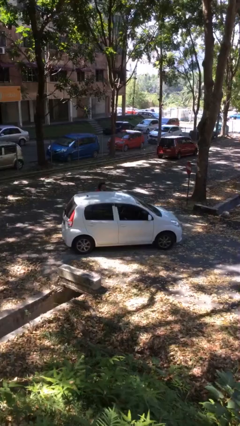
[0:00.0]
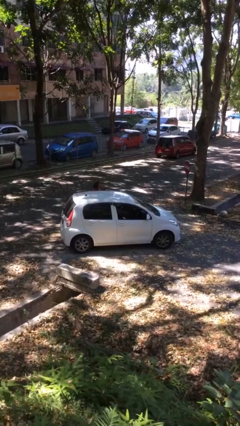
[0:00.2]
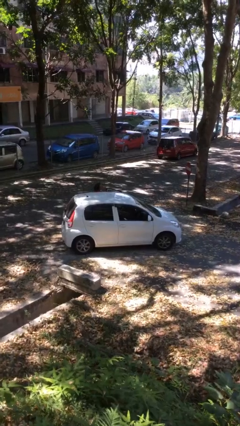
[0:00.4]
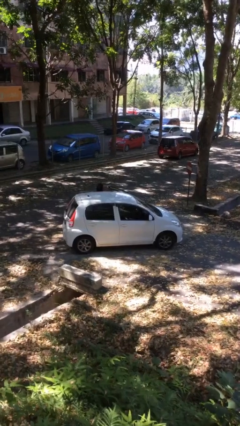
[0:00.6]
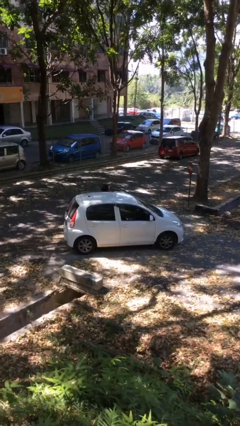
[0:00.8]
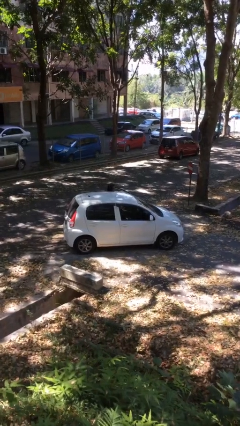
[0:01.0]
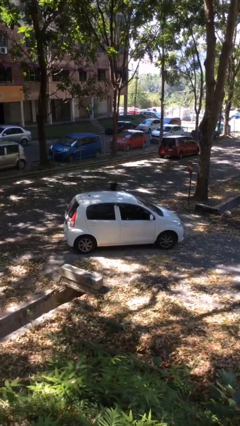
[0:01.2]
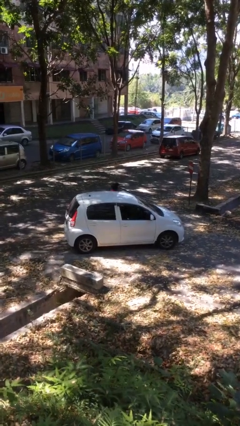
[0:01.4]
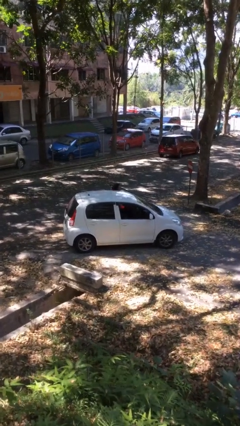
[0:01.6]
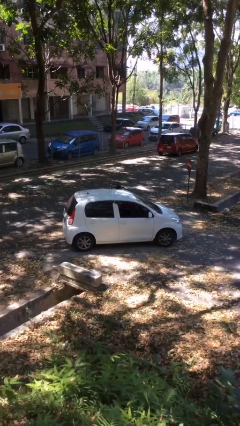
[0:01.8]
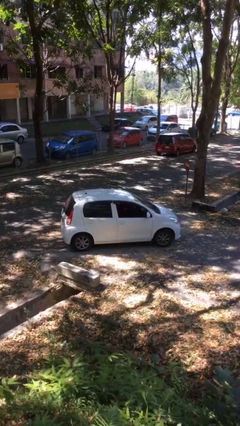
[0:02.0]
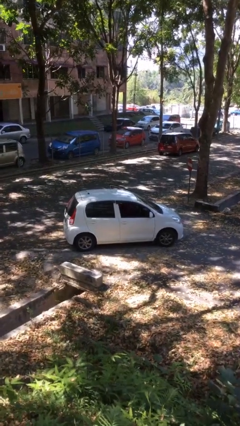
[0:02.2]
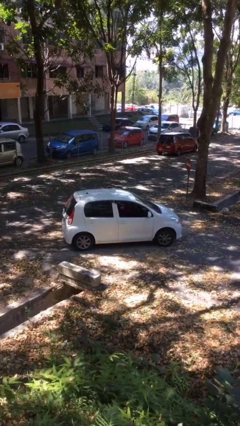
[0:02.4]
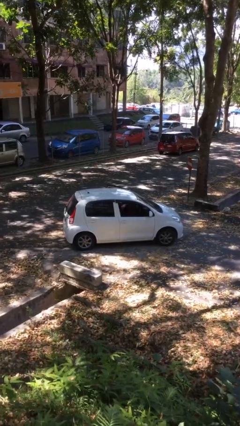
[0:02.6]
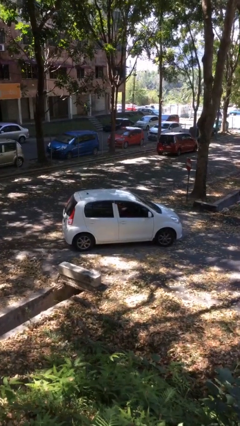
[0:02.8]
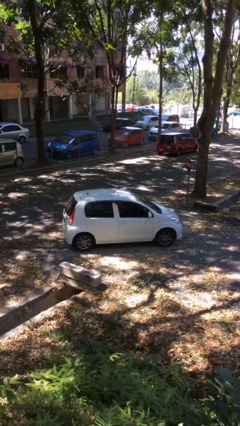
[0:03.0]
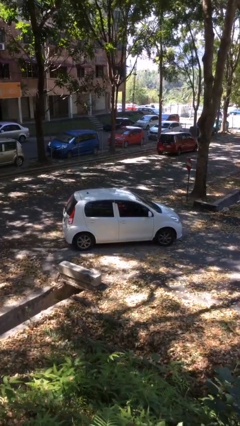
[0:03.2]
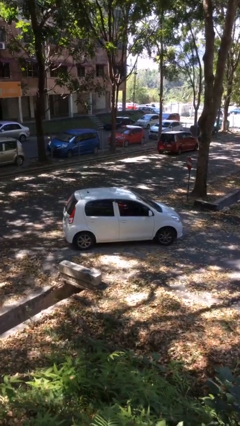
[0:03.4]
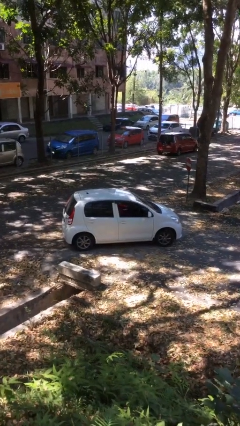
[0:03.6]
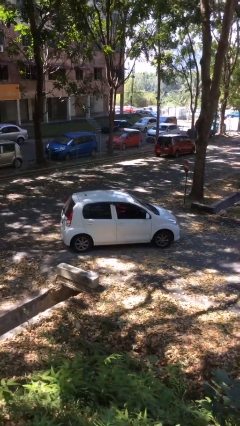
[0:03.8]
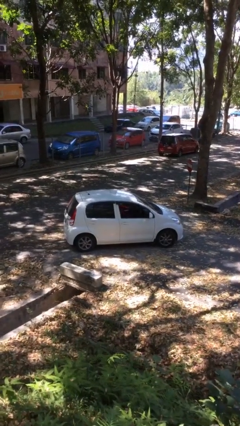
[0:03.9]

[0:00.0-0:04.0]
car picks up person

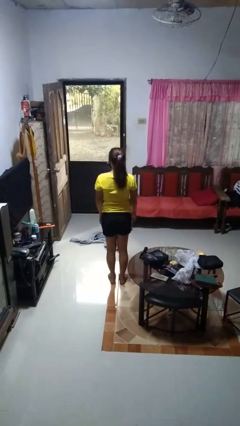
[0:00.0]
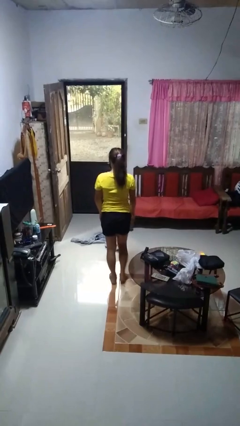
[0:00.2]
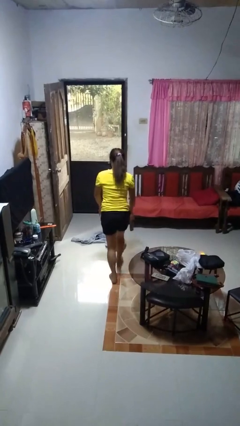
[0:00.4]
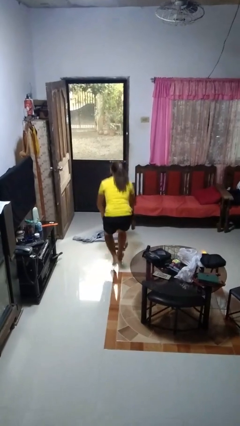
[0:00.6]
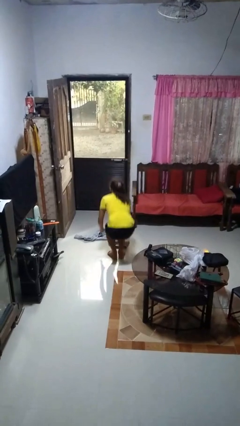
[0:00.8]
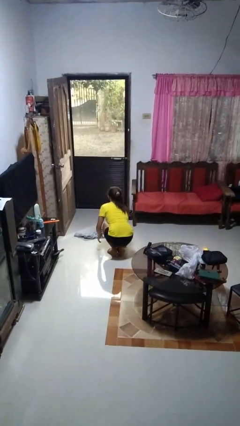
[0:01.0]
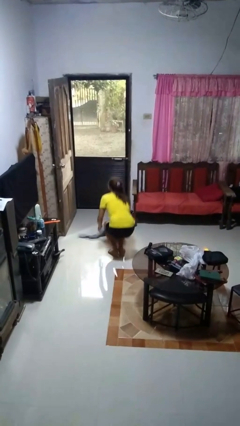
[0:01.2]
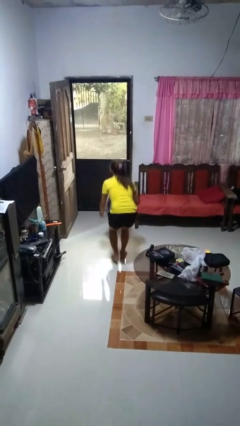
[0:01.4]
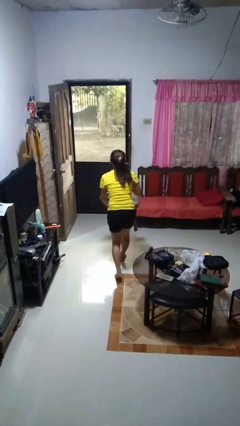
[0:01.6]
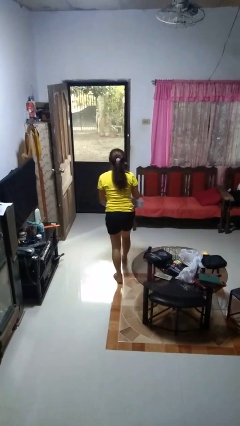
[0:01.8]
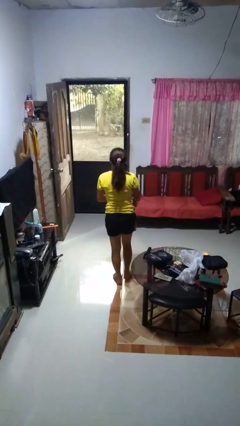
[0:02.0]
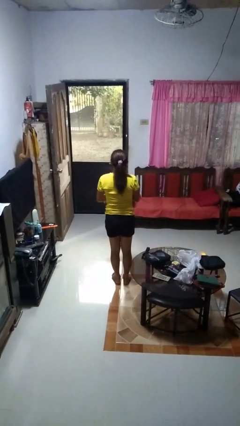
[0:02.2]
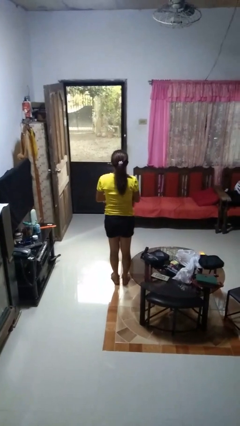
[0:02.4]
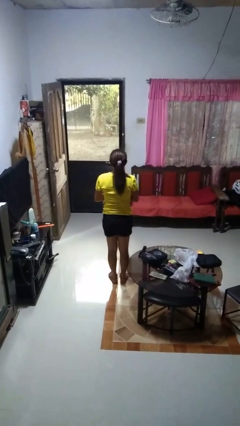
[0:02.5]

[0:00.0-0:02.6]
person picks up object from floor

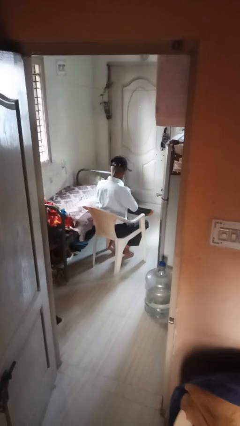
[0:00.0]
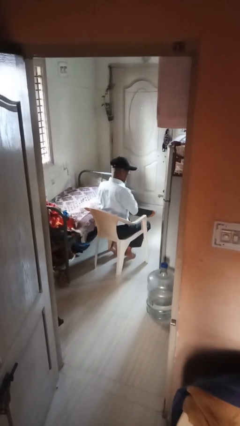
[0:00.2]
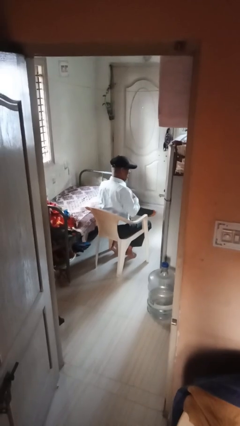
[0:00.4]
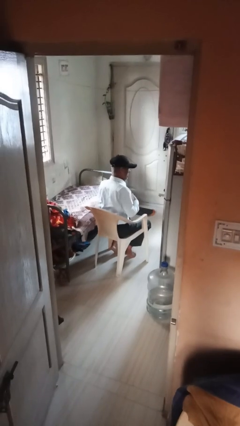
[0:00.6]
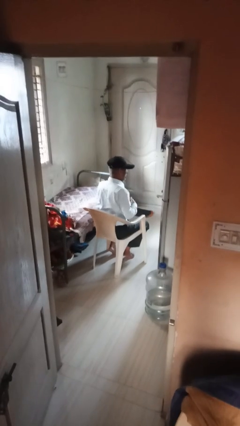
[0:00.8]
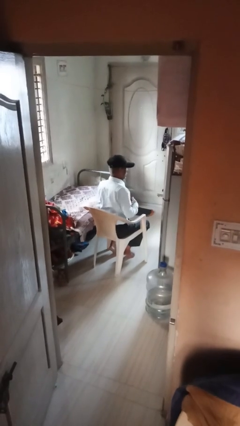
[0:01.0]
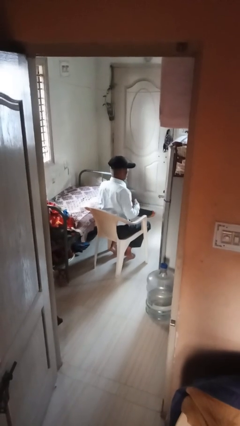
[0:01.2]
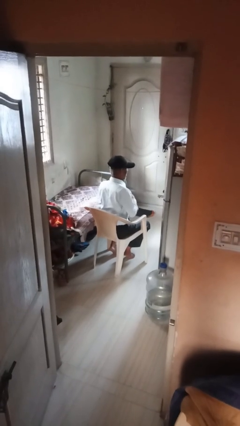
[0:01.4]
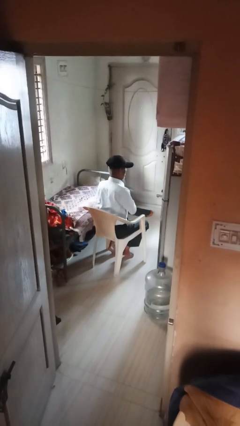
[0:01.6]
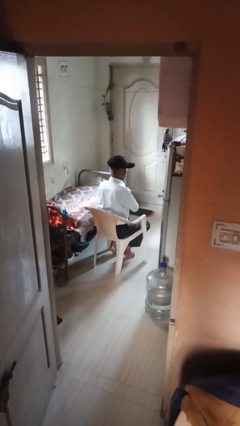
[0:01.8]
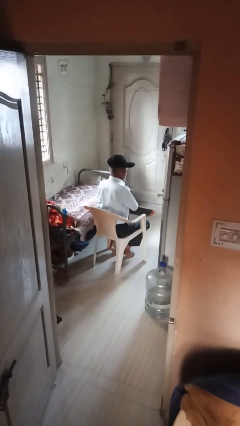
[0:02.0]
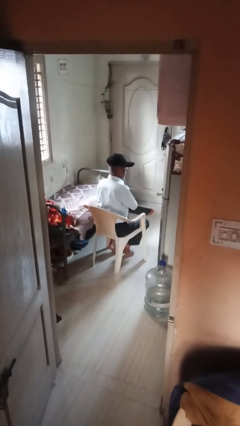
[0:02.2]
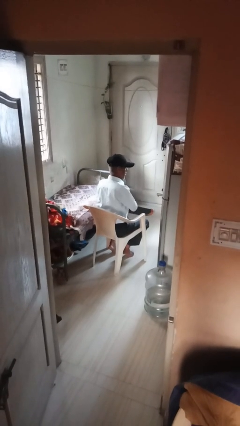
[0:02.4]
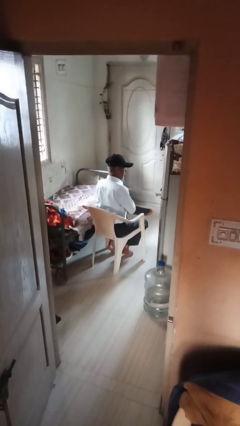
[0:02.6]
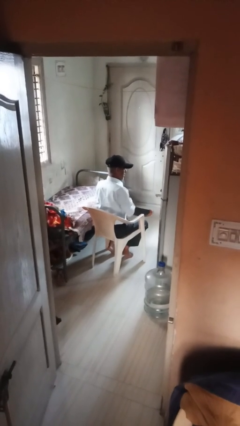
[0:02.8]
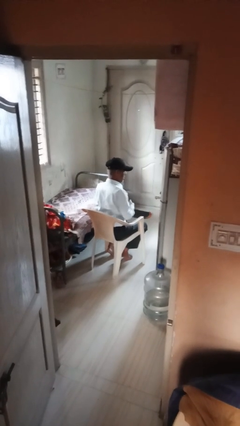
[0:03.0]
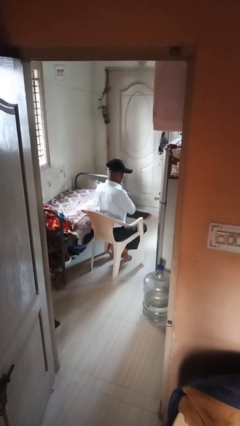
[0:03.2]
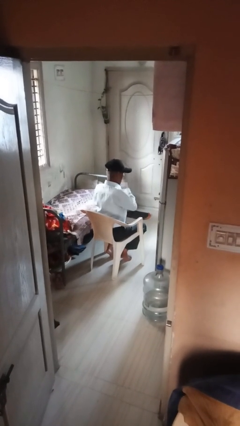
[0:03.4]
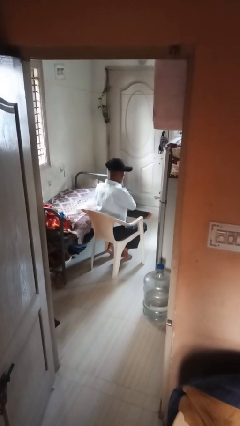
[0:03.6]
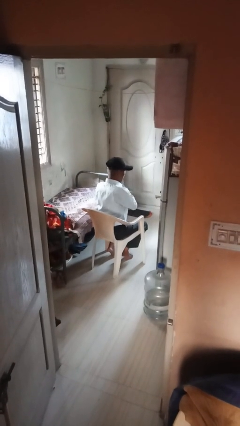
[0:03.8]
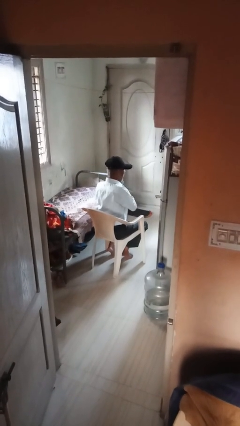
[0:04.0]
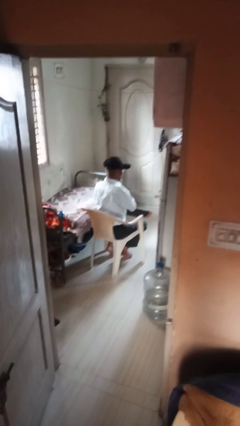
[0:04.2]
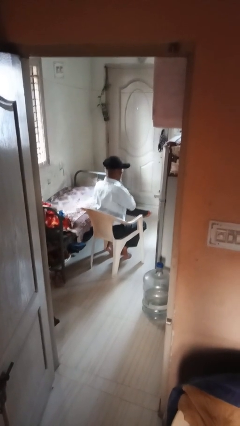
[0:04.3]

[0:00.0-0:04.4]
person drums on chest

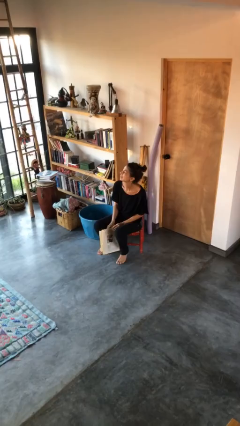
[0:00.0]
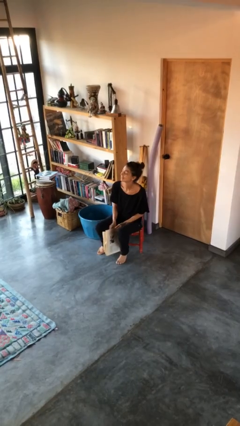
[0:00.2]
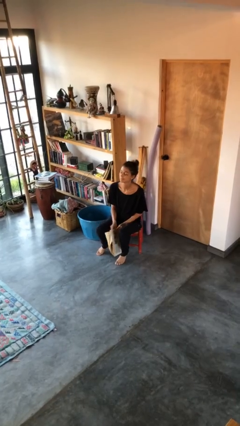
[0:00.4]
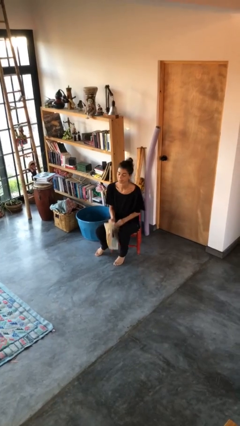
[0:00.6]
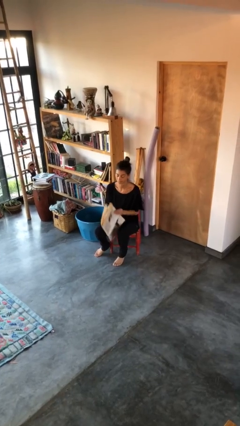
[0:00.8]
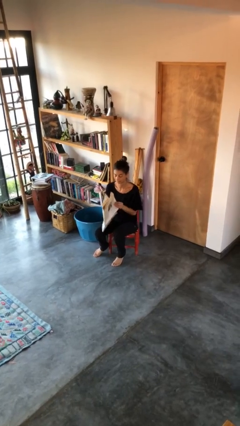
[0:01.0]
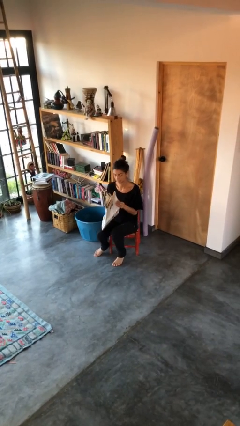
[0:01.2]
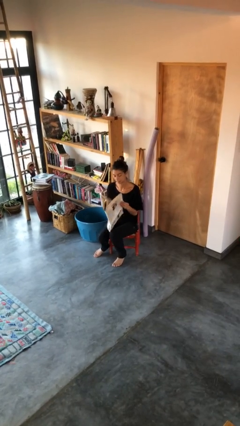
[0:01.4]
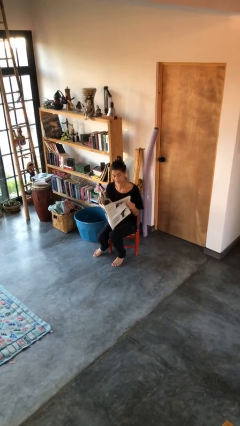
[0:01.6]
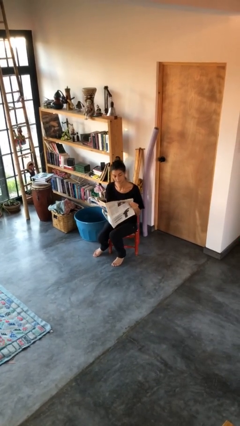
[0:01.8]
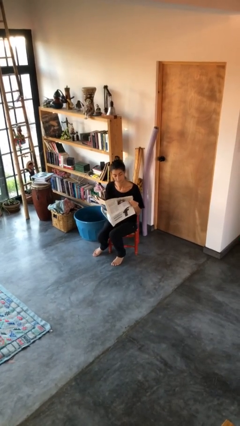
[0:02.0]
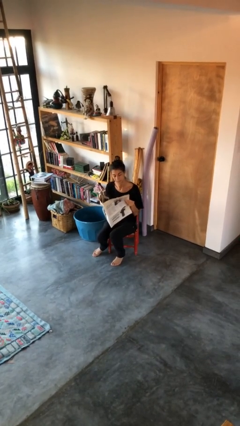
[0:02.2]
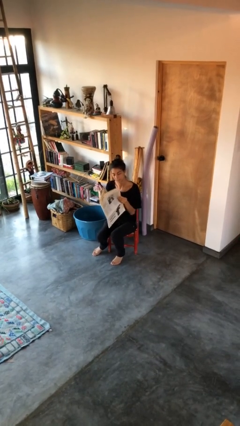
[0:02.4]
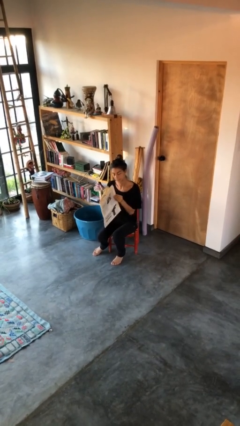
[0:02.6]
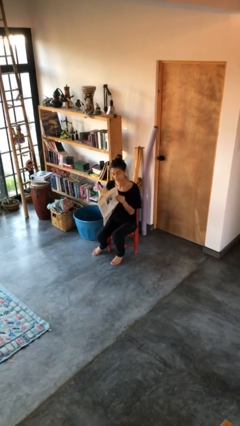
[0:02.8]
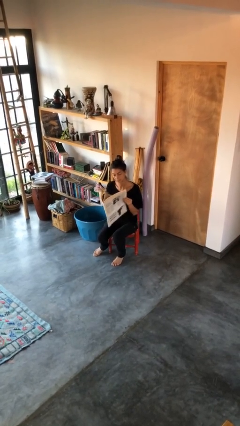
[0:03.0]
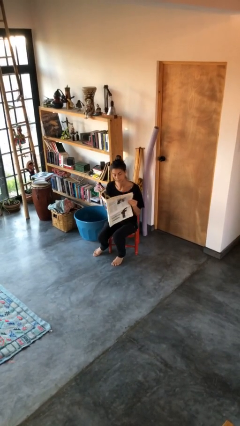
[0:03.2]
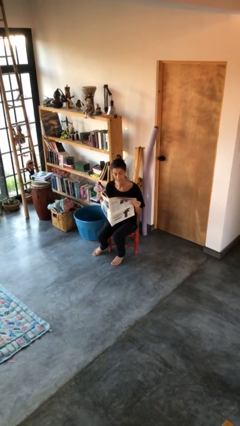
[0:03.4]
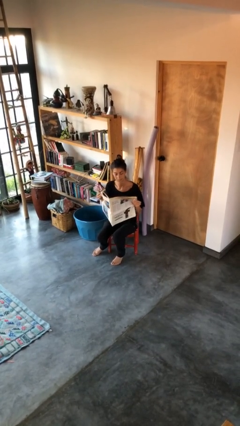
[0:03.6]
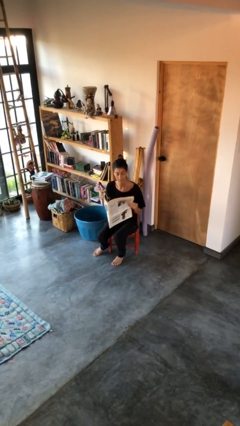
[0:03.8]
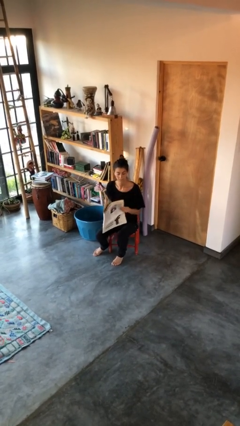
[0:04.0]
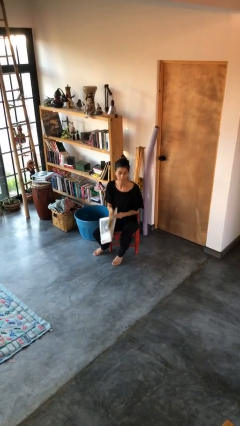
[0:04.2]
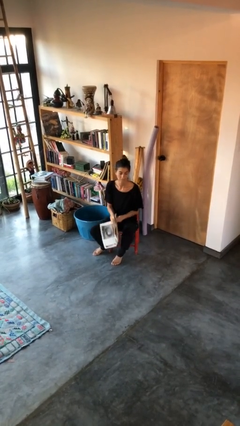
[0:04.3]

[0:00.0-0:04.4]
person reads newspaper

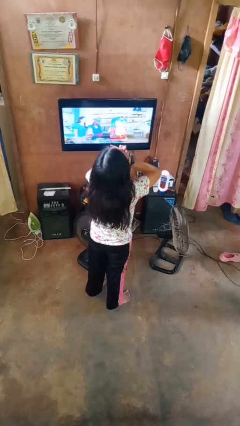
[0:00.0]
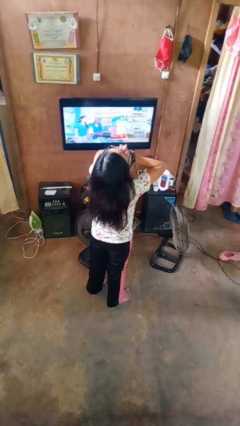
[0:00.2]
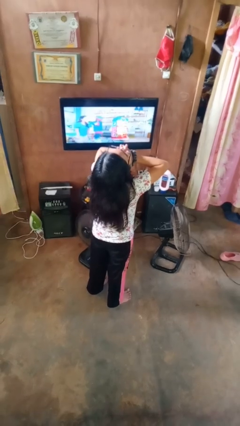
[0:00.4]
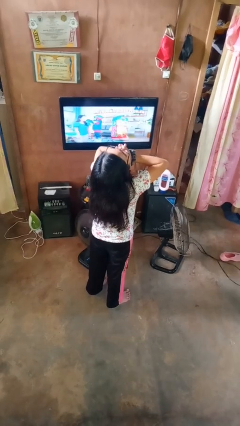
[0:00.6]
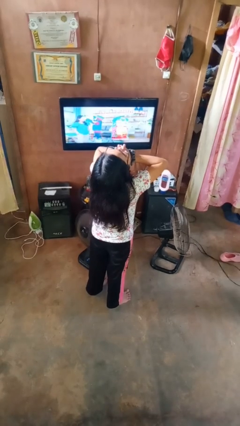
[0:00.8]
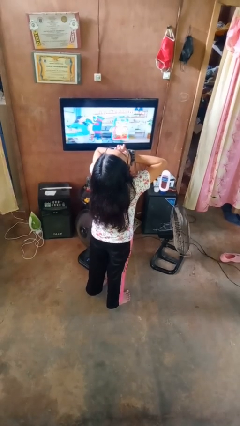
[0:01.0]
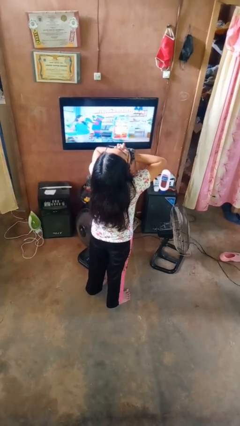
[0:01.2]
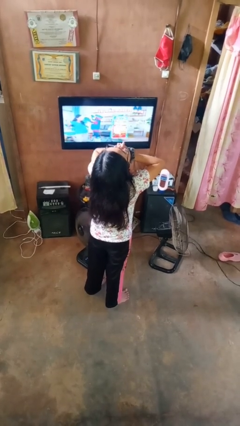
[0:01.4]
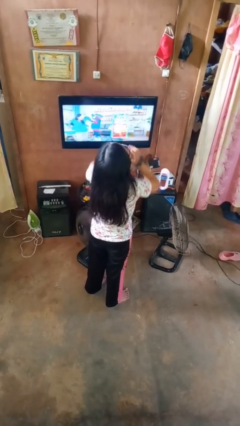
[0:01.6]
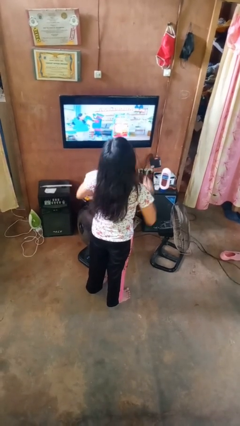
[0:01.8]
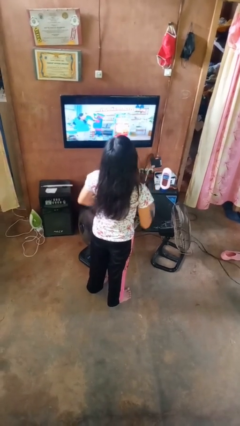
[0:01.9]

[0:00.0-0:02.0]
person yawns
